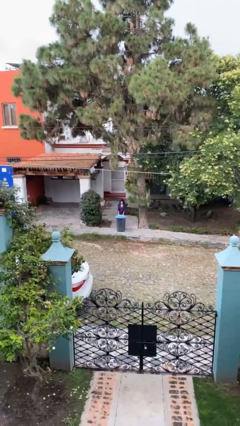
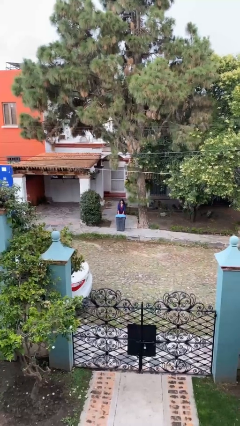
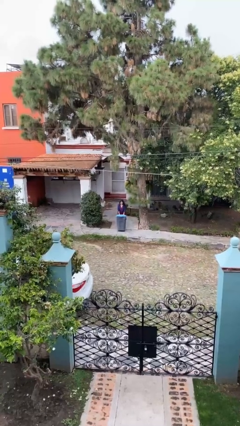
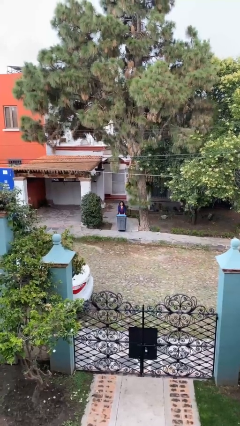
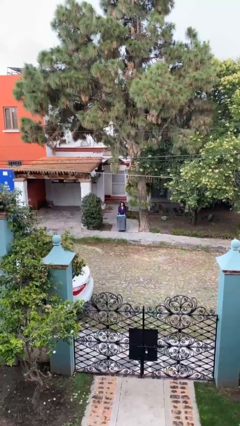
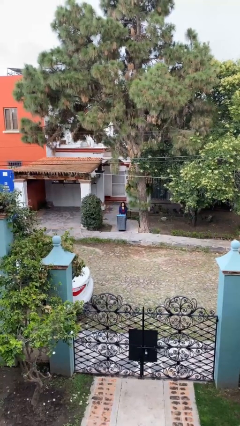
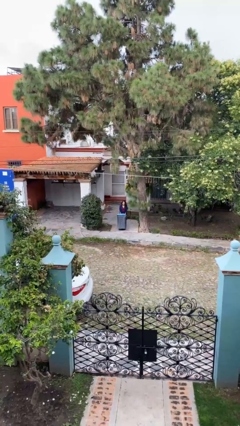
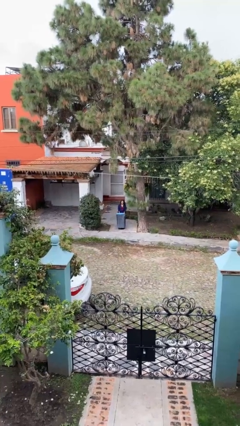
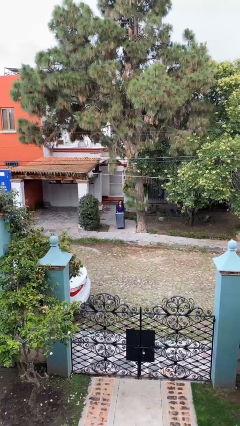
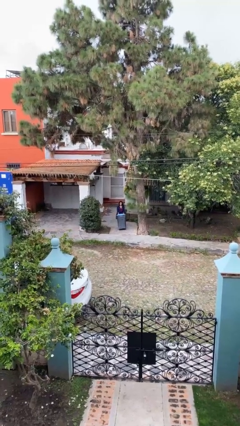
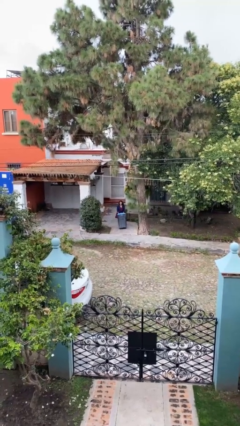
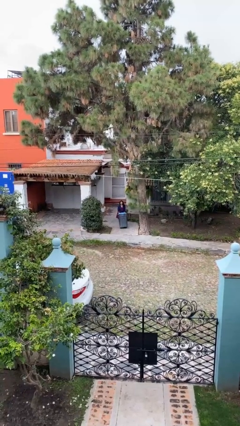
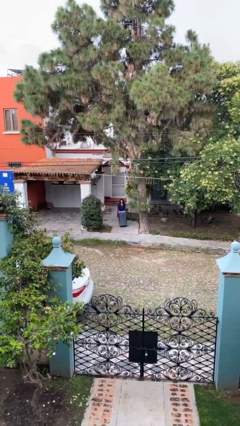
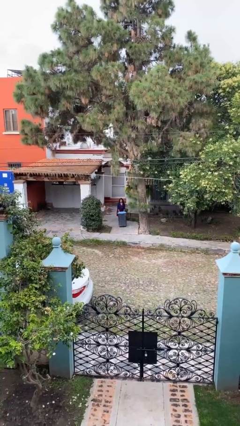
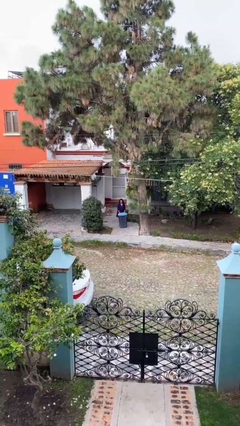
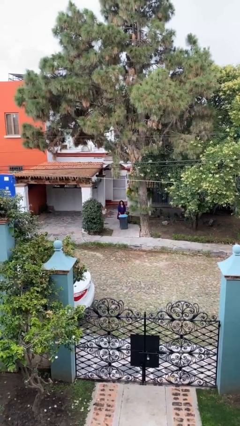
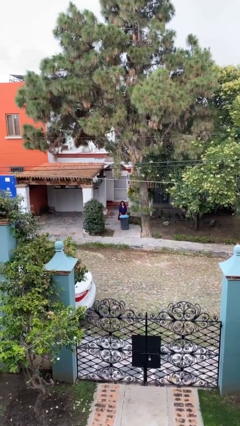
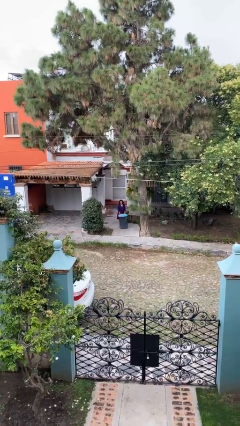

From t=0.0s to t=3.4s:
person pulls wheeled trashcan

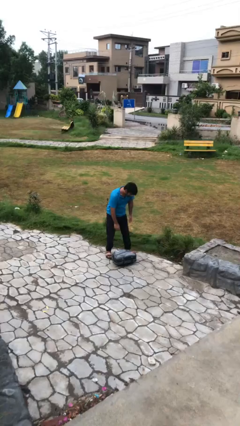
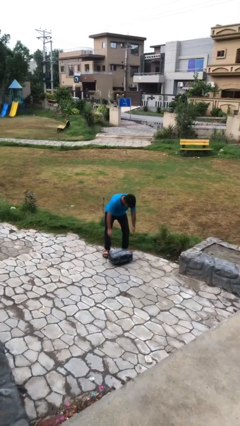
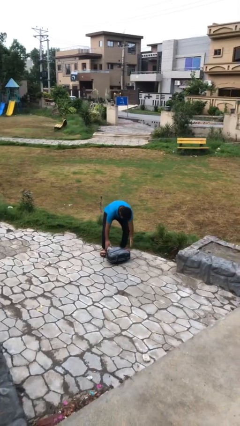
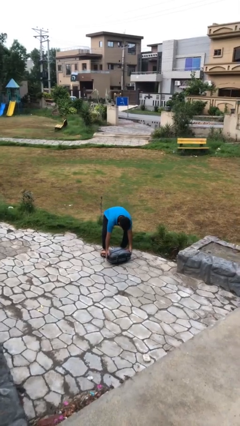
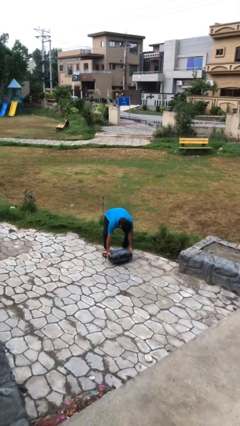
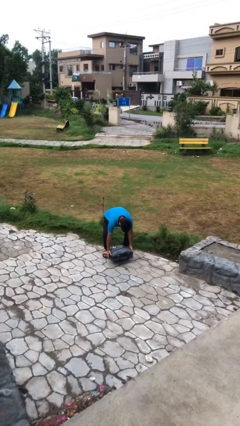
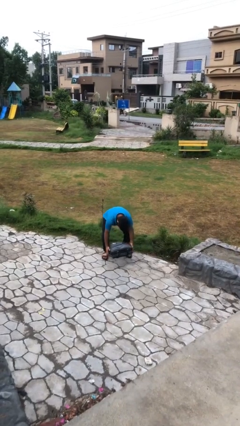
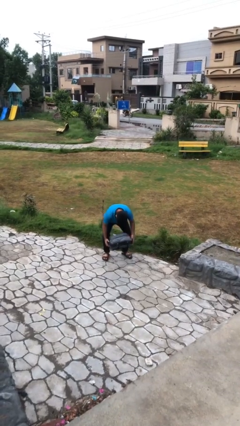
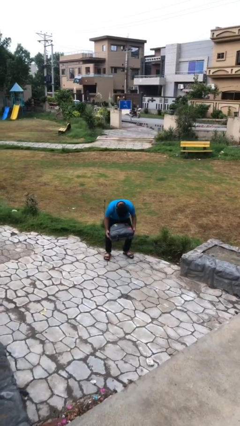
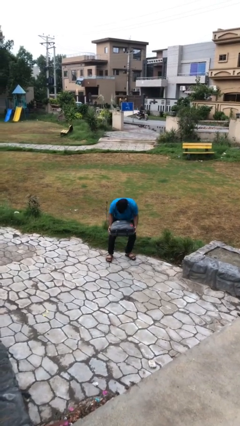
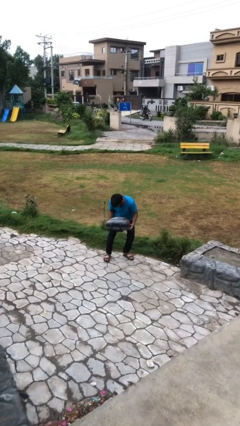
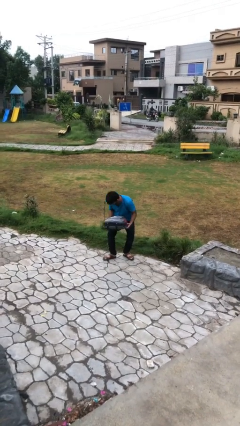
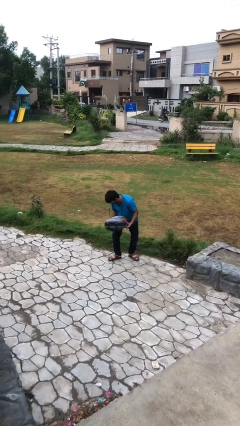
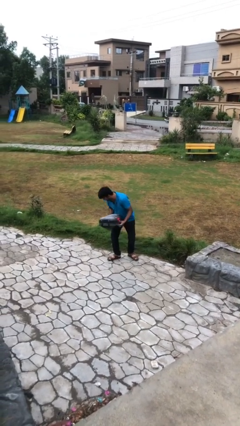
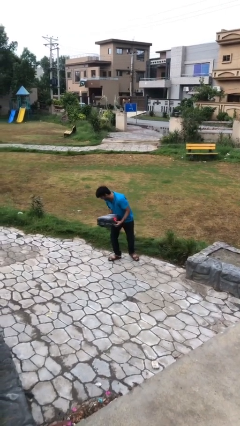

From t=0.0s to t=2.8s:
person picks up object from floor

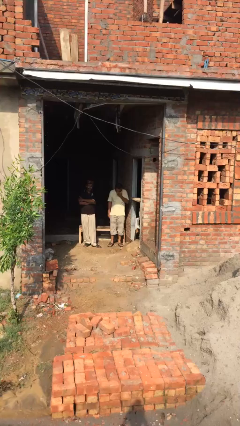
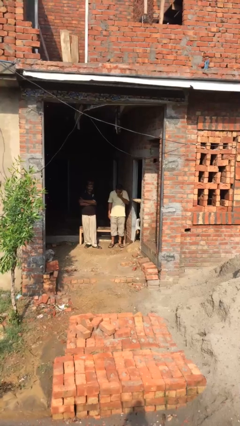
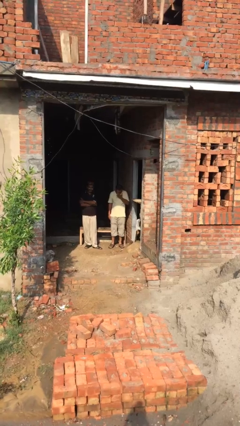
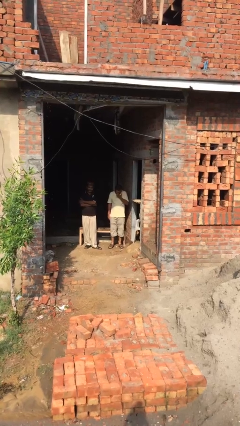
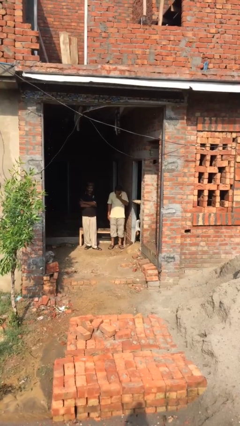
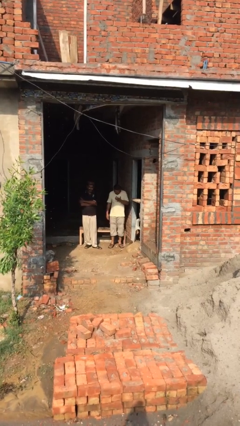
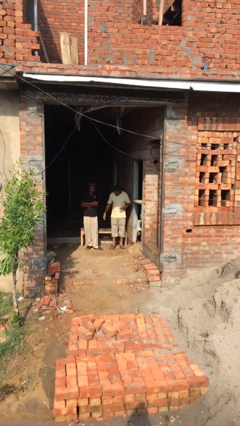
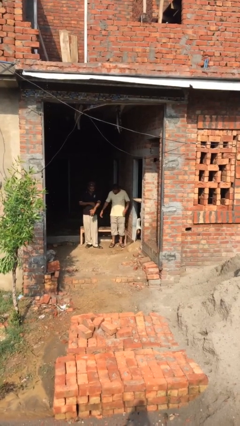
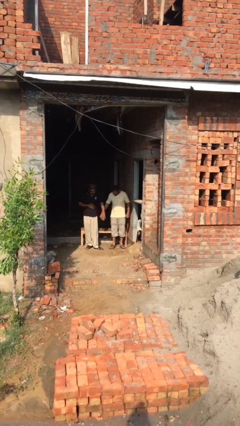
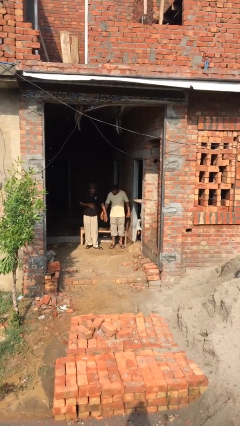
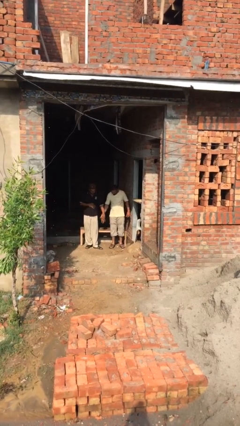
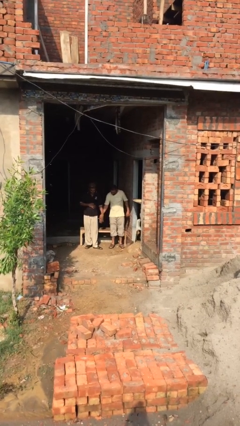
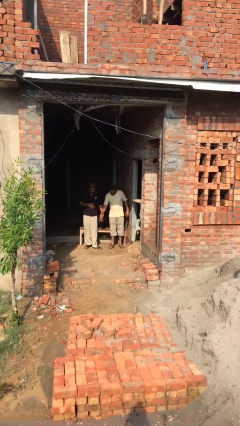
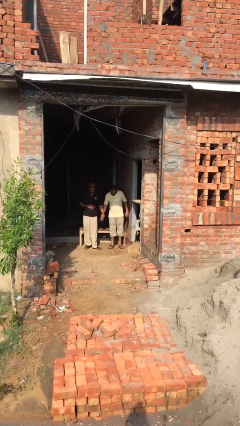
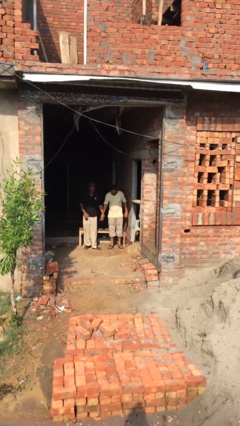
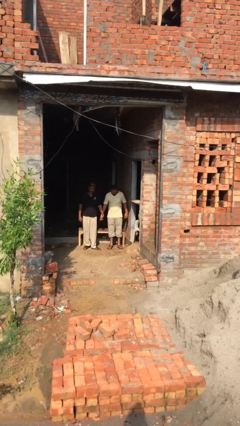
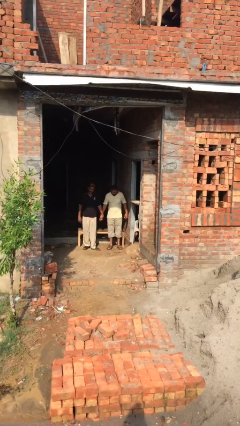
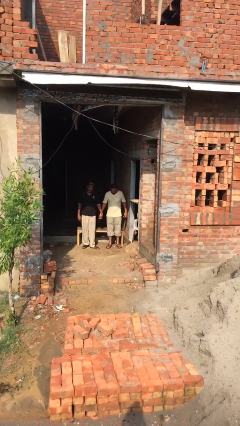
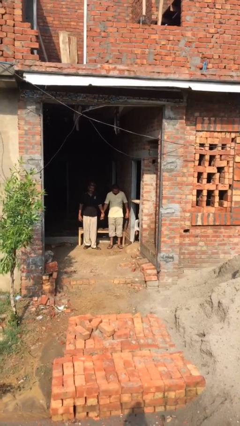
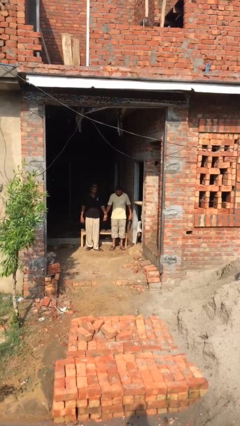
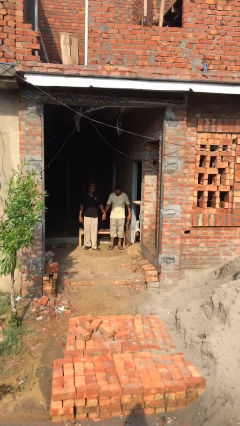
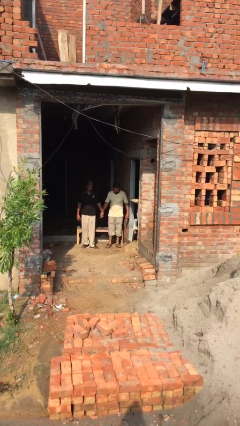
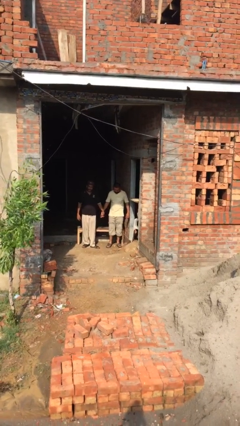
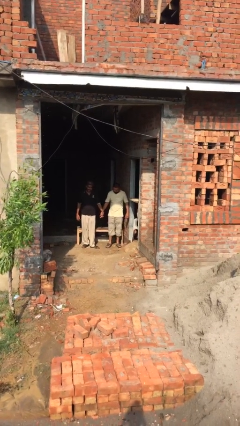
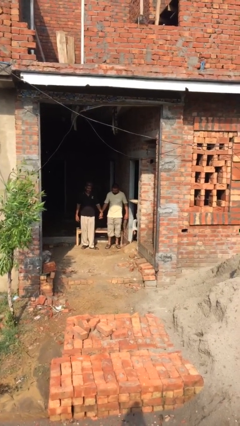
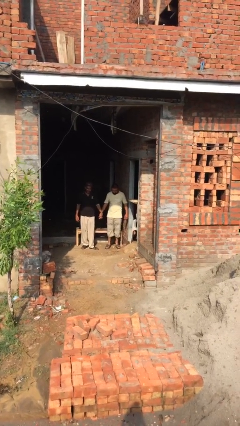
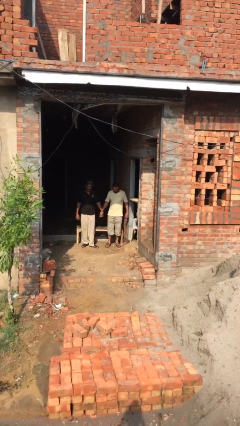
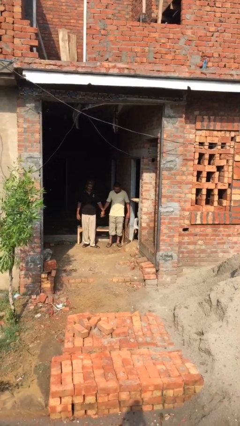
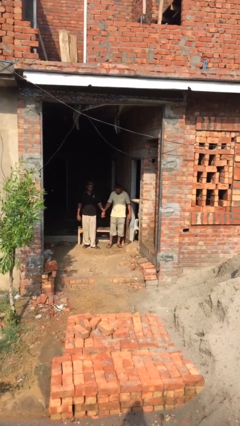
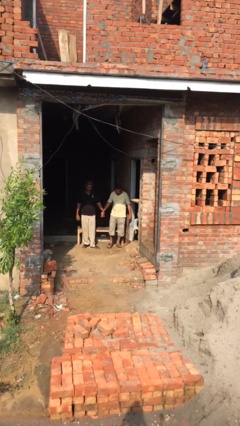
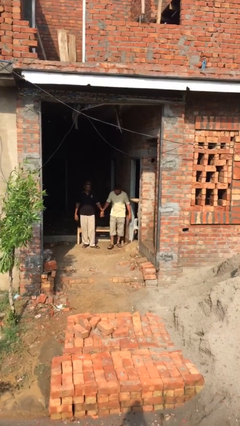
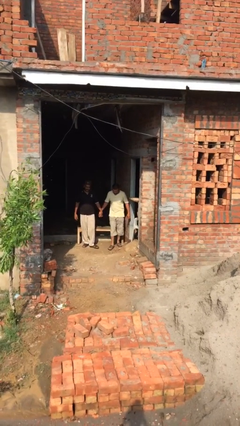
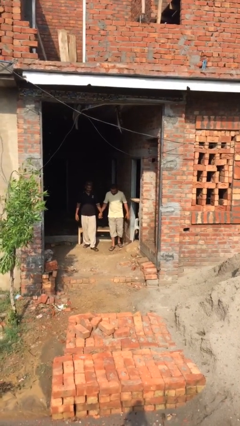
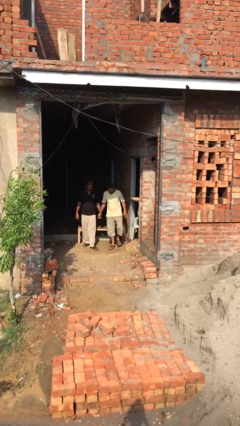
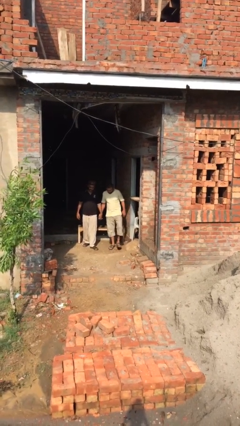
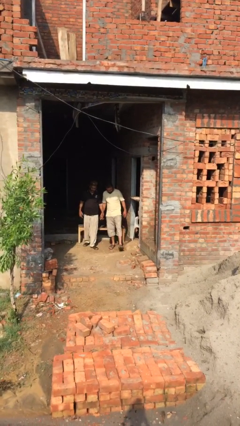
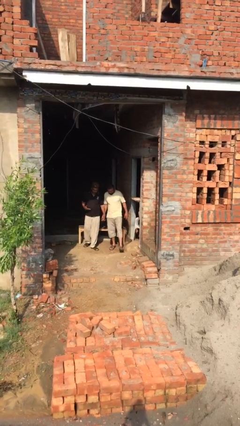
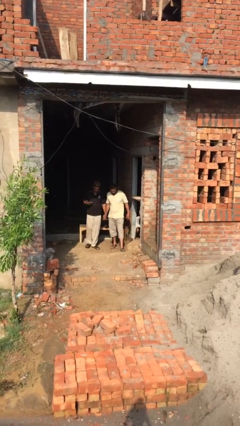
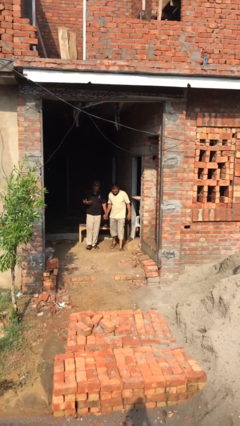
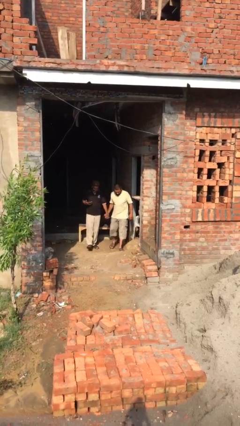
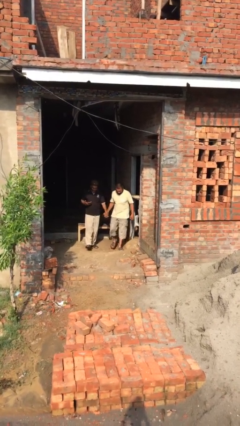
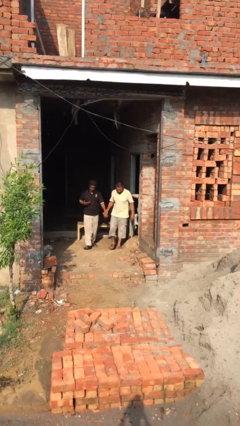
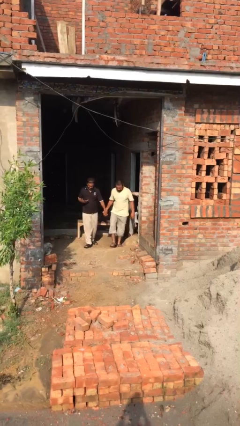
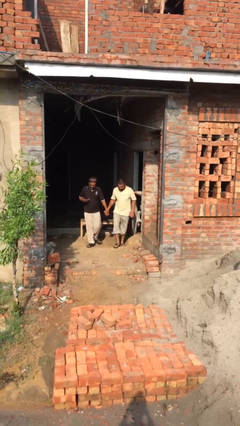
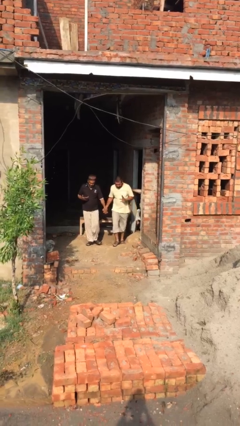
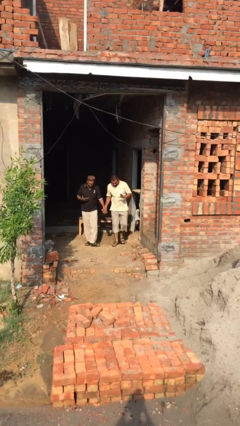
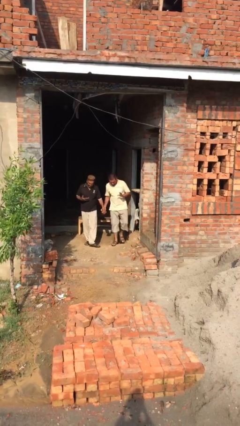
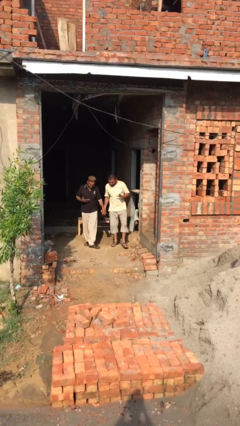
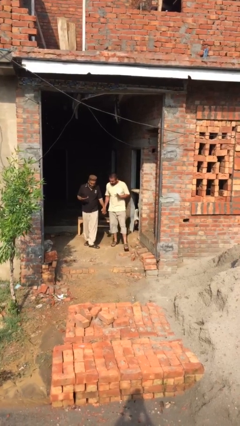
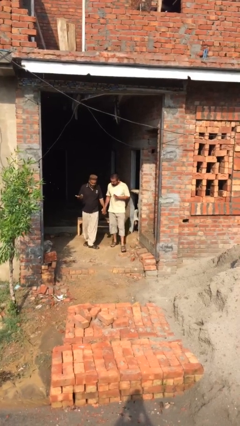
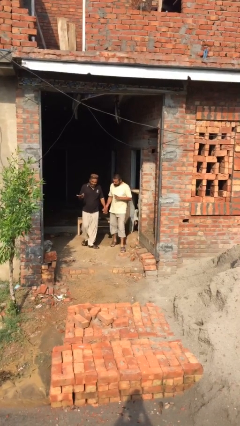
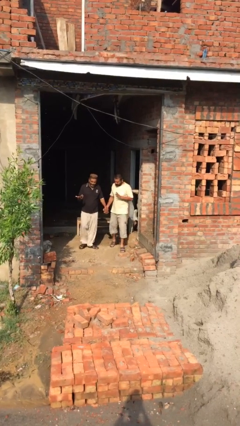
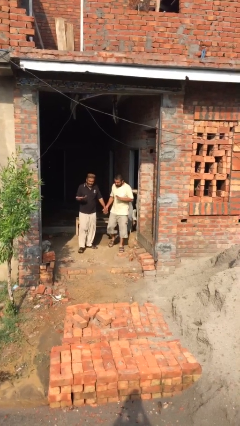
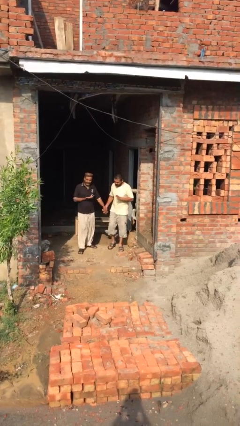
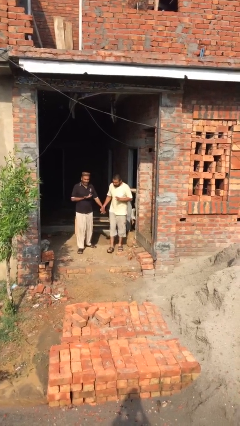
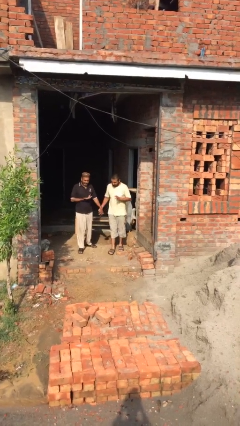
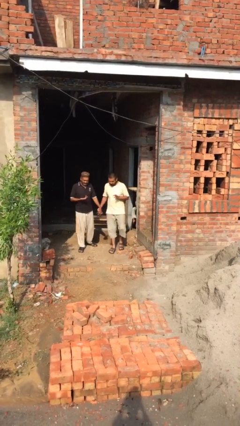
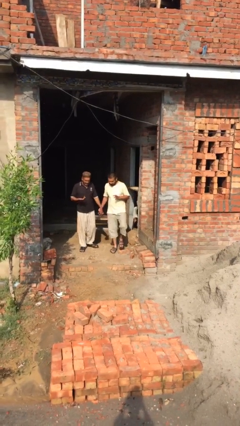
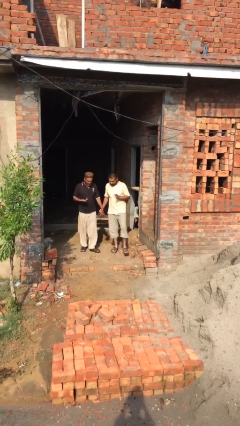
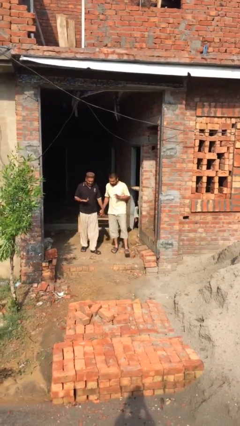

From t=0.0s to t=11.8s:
person holds hand

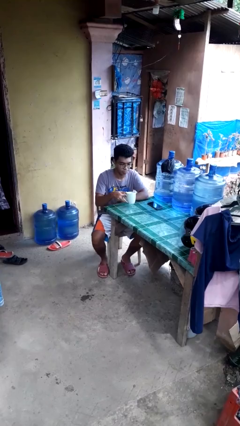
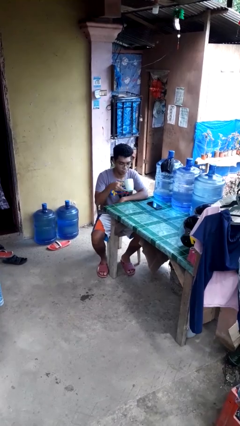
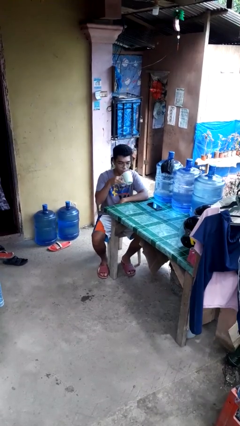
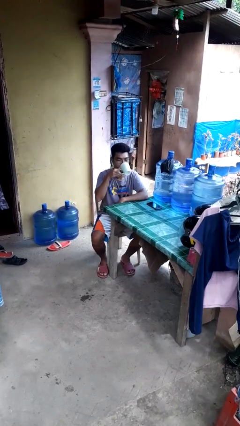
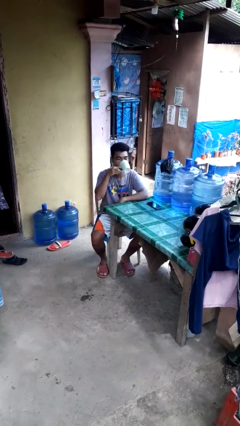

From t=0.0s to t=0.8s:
person picks up object from table
